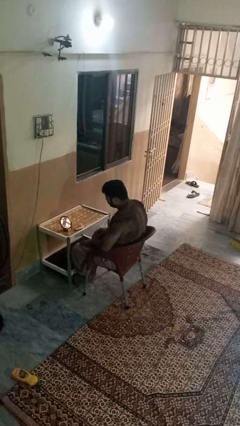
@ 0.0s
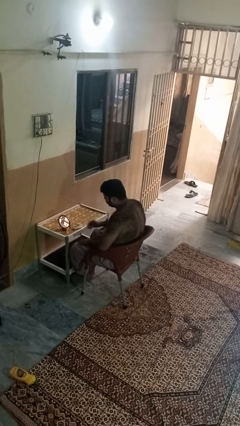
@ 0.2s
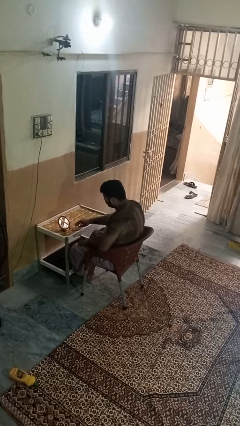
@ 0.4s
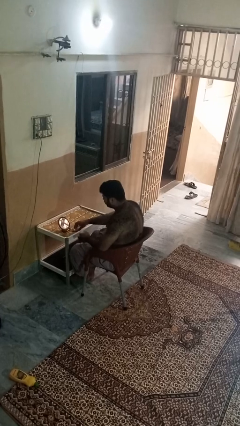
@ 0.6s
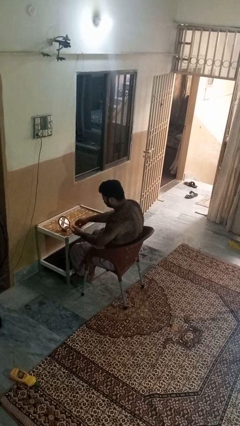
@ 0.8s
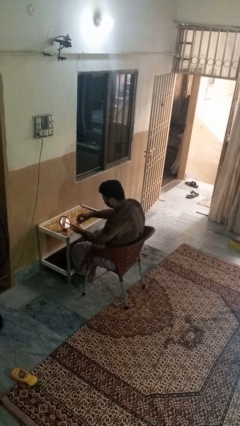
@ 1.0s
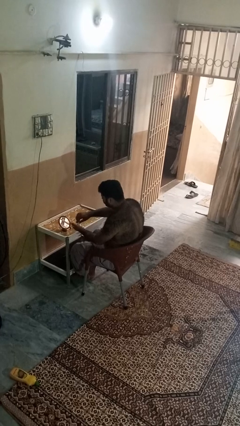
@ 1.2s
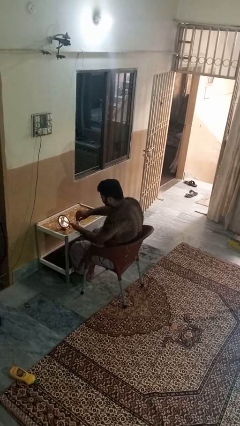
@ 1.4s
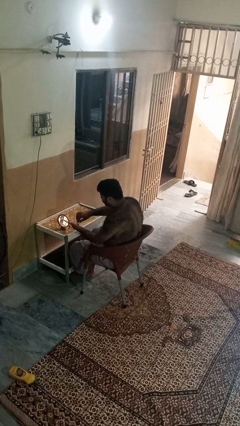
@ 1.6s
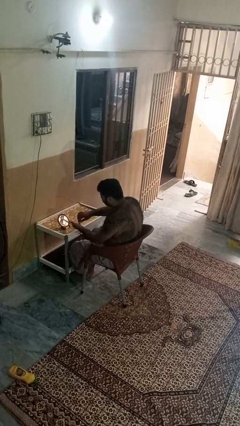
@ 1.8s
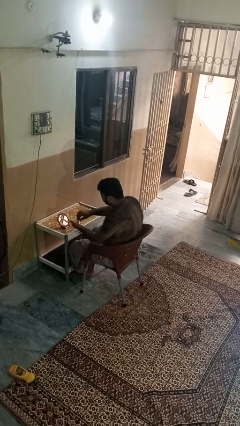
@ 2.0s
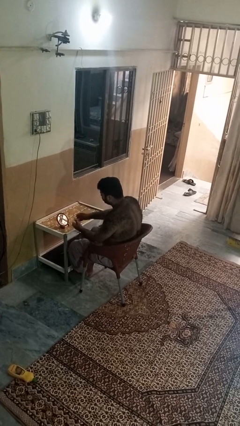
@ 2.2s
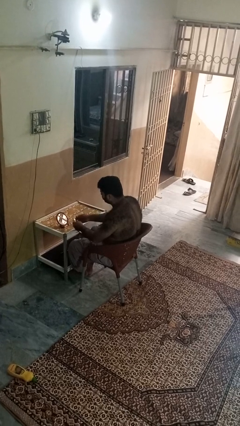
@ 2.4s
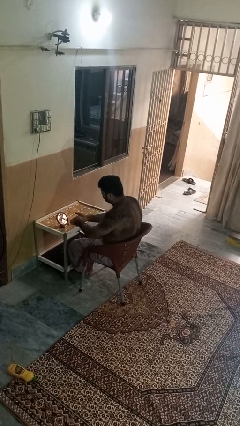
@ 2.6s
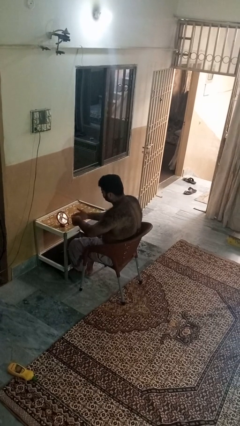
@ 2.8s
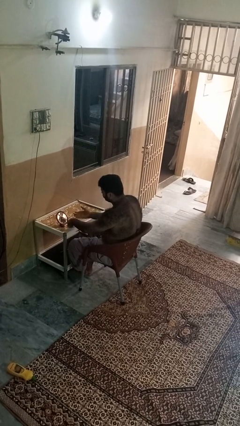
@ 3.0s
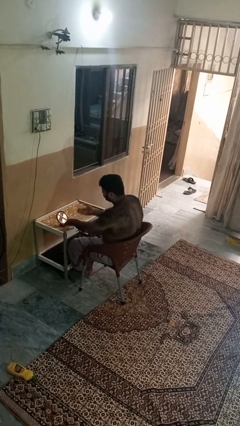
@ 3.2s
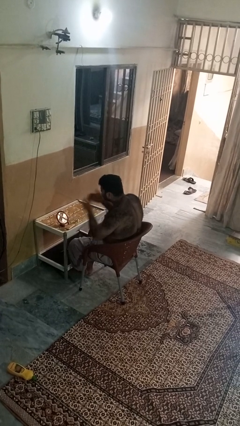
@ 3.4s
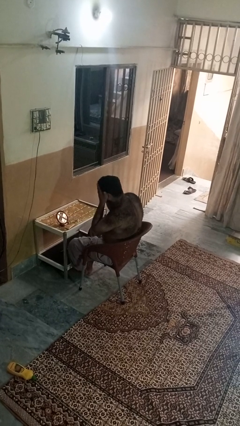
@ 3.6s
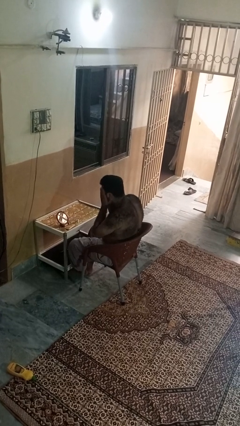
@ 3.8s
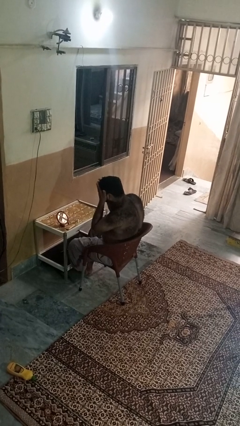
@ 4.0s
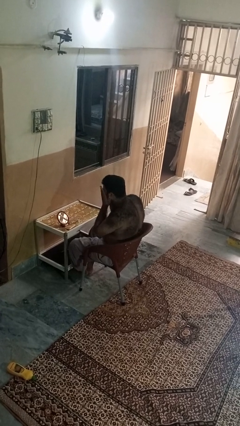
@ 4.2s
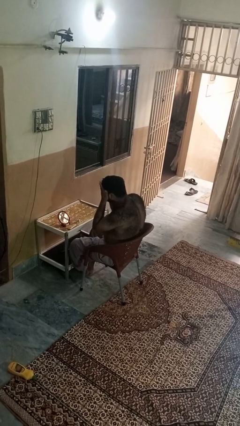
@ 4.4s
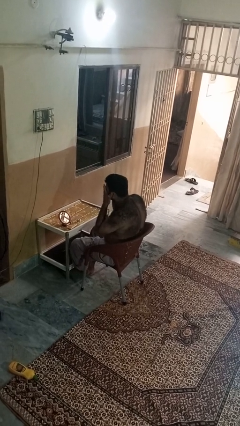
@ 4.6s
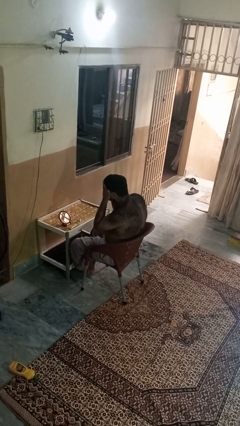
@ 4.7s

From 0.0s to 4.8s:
person applies foundation makeup

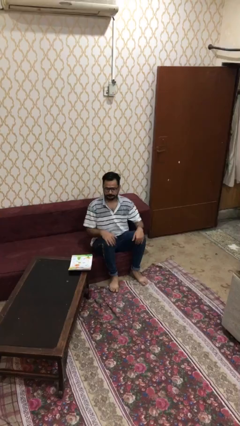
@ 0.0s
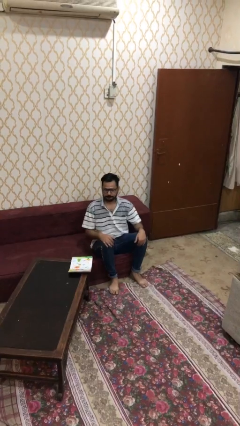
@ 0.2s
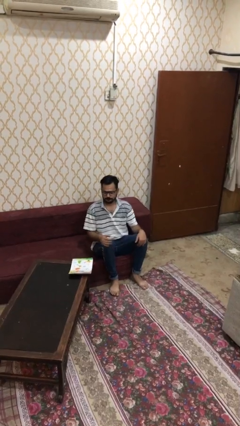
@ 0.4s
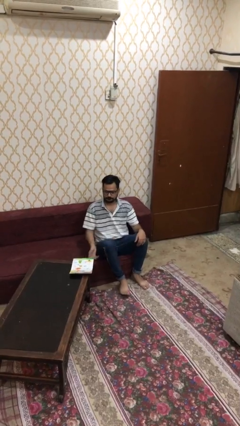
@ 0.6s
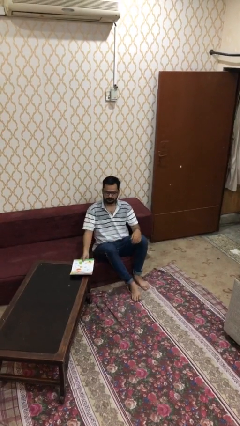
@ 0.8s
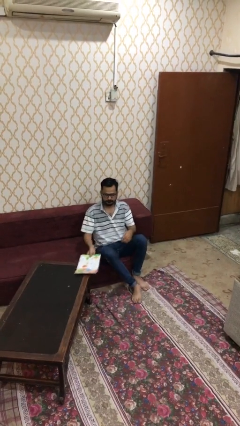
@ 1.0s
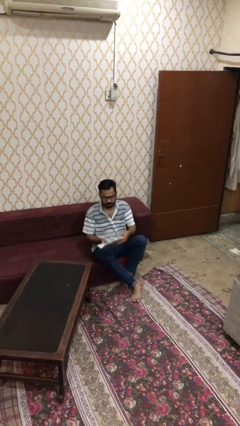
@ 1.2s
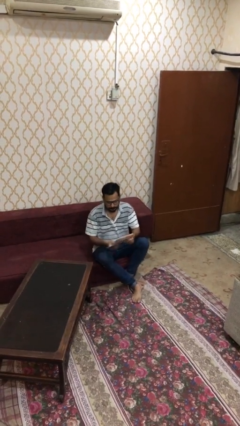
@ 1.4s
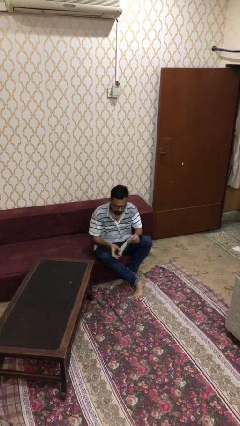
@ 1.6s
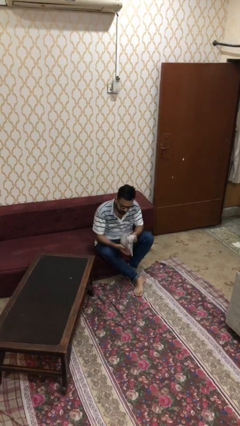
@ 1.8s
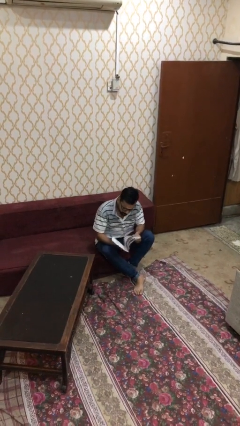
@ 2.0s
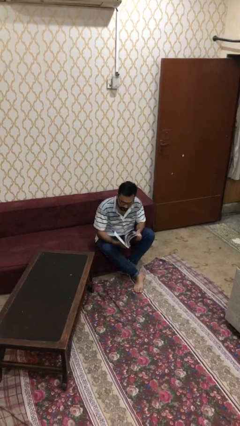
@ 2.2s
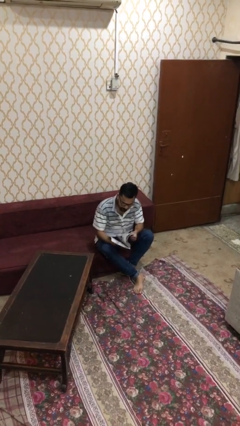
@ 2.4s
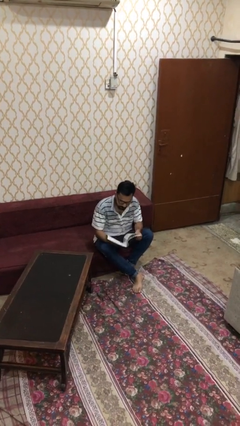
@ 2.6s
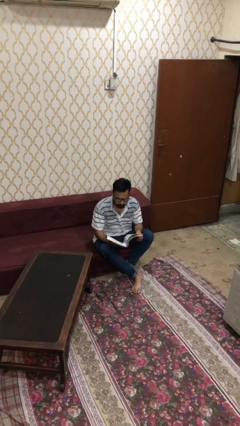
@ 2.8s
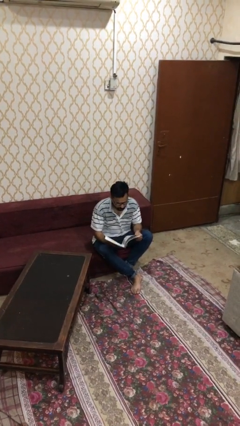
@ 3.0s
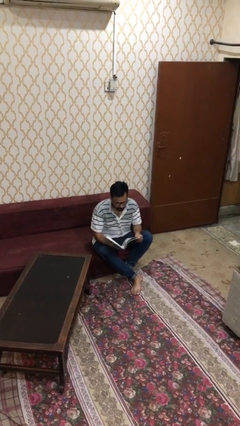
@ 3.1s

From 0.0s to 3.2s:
person reads document

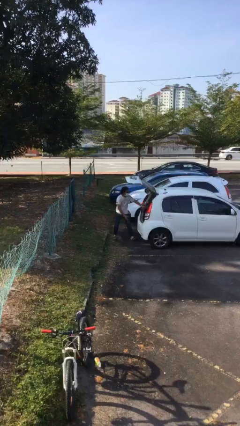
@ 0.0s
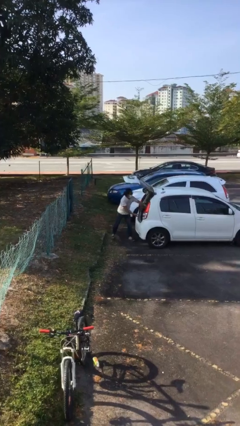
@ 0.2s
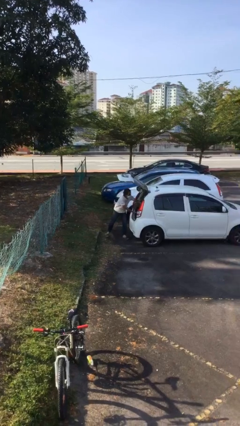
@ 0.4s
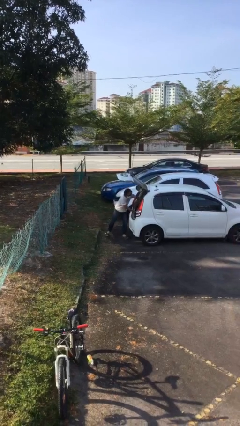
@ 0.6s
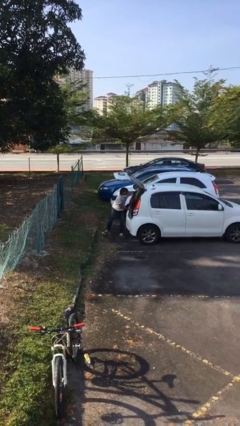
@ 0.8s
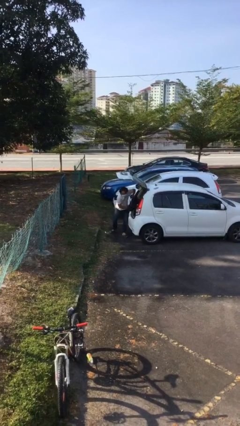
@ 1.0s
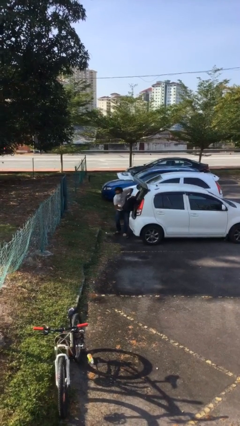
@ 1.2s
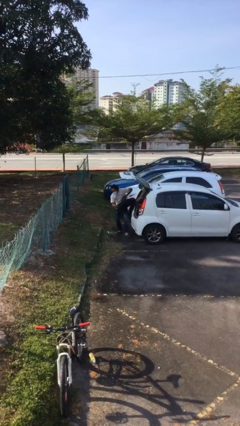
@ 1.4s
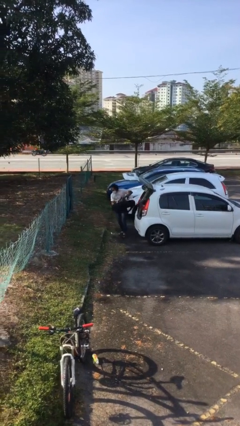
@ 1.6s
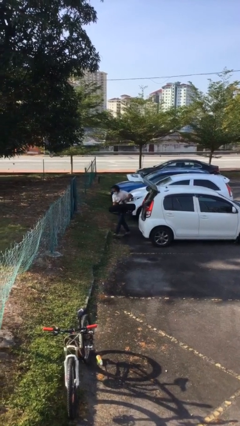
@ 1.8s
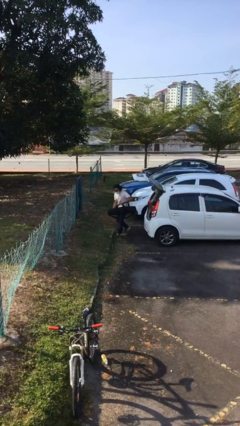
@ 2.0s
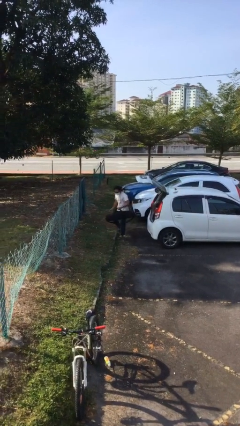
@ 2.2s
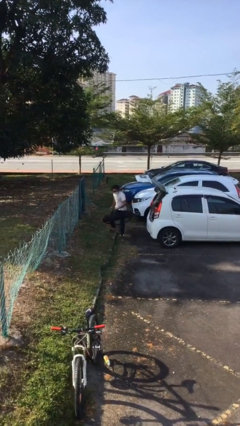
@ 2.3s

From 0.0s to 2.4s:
person unloads car

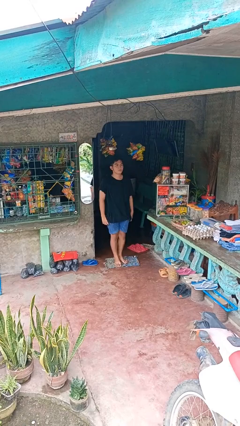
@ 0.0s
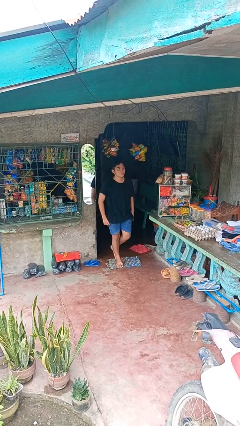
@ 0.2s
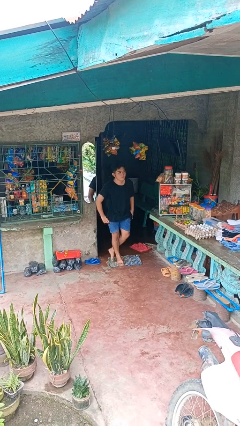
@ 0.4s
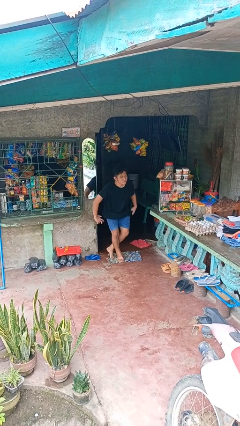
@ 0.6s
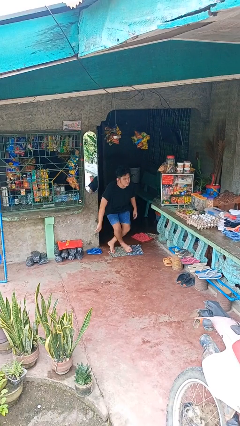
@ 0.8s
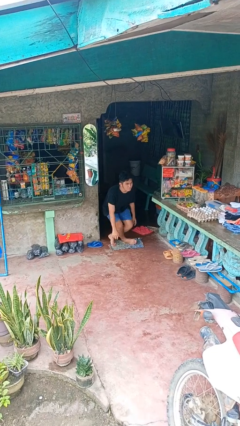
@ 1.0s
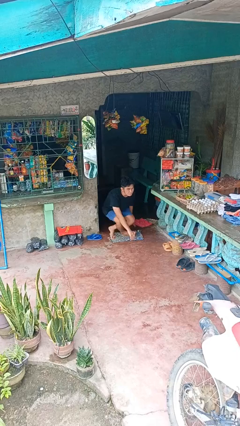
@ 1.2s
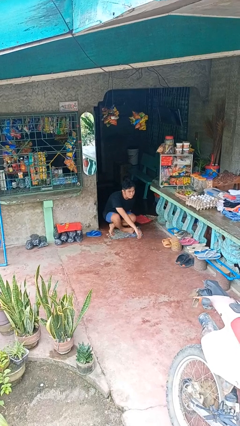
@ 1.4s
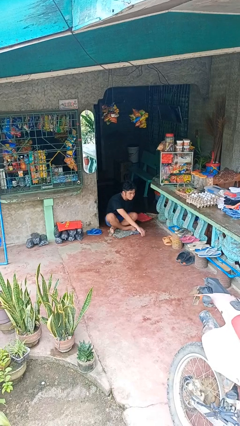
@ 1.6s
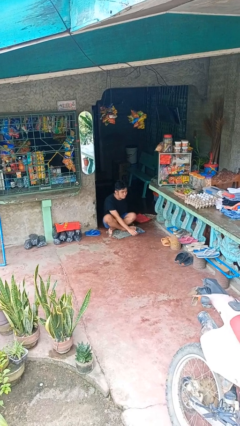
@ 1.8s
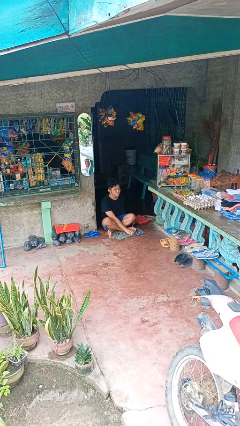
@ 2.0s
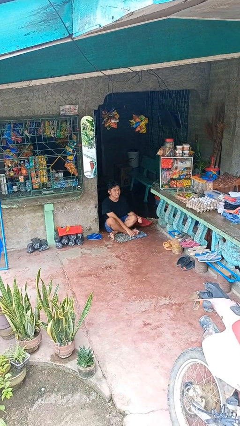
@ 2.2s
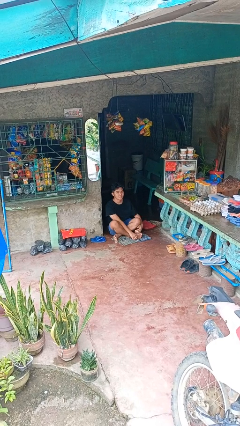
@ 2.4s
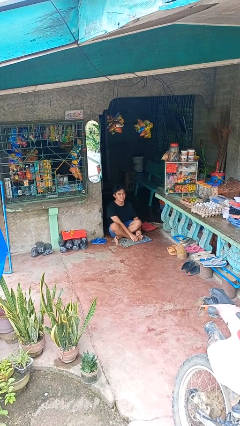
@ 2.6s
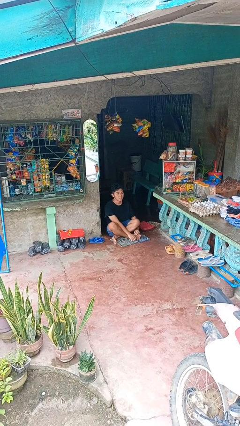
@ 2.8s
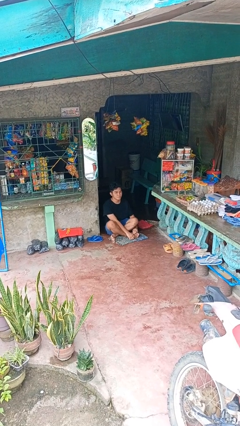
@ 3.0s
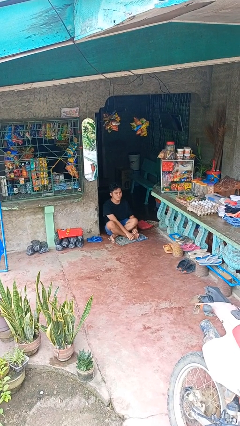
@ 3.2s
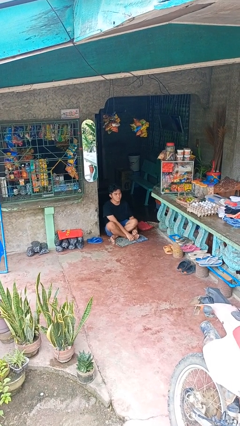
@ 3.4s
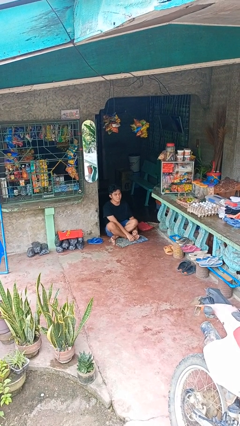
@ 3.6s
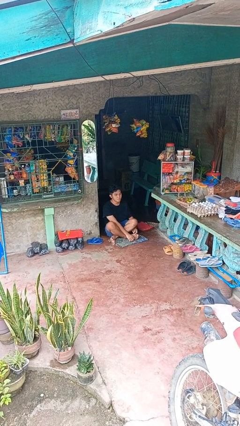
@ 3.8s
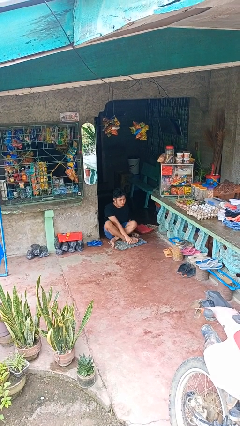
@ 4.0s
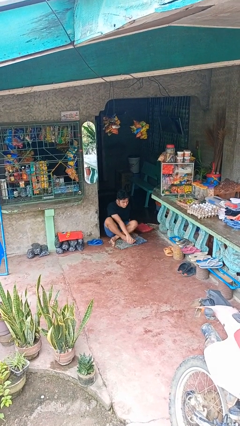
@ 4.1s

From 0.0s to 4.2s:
person sits crisscross

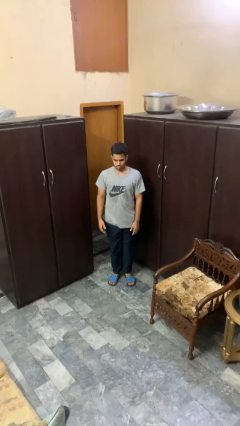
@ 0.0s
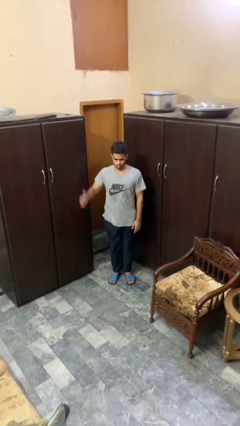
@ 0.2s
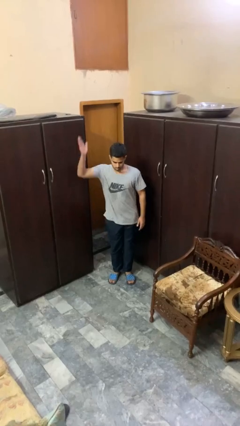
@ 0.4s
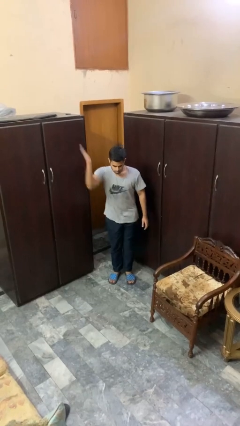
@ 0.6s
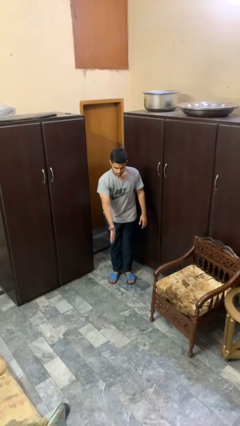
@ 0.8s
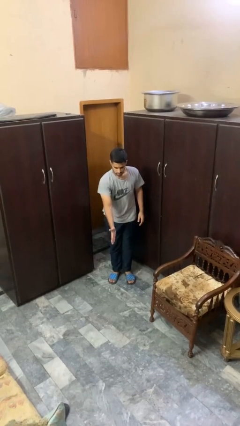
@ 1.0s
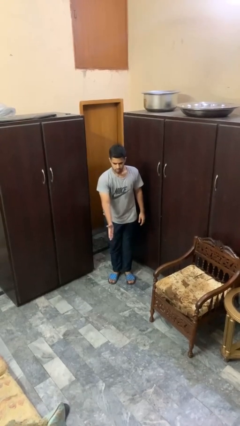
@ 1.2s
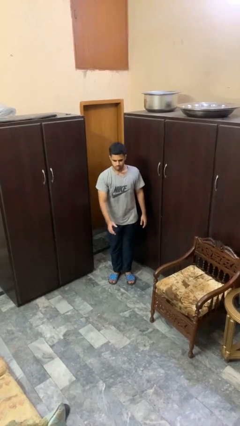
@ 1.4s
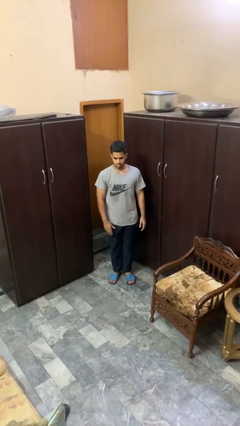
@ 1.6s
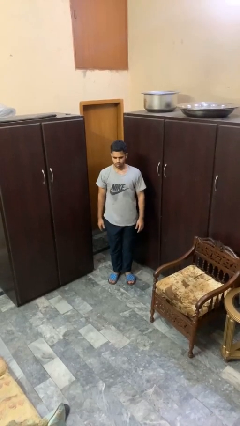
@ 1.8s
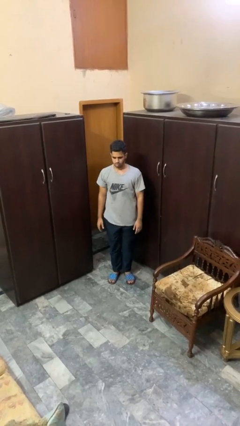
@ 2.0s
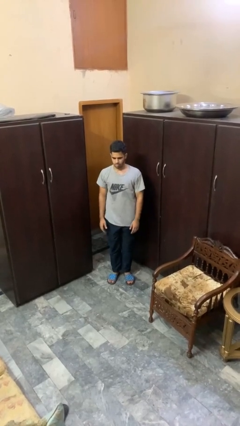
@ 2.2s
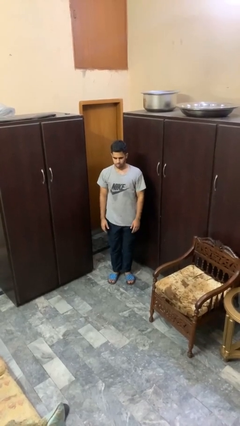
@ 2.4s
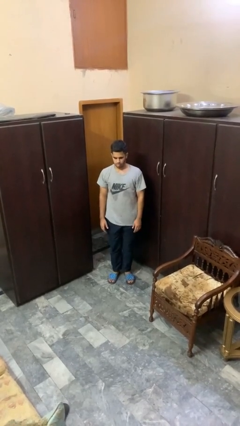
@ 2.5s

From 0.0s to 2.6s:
person karate chop

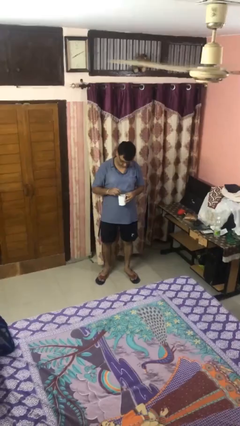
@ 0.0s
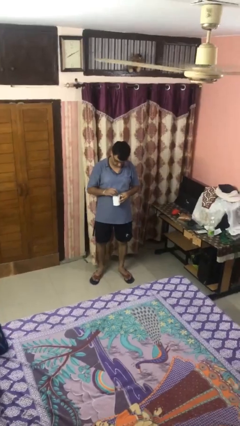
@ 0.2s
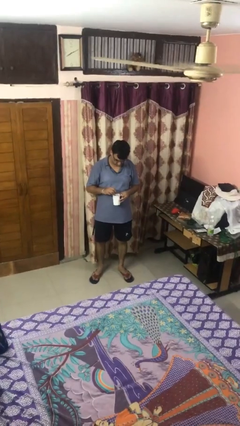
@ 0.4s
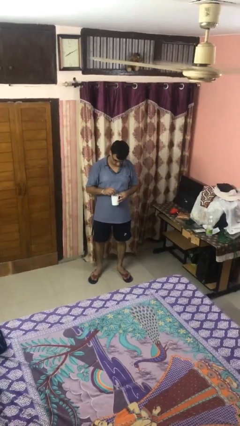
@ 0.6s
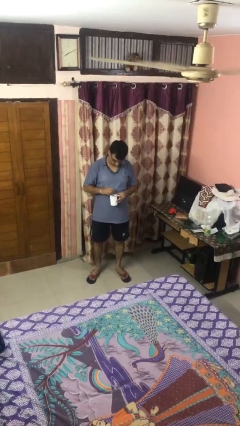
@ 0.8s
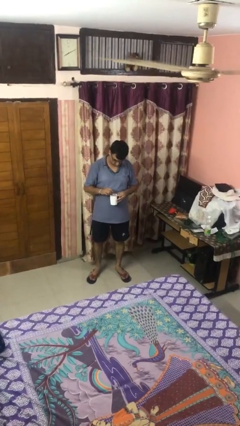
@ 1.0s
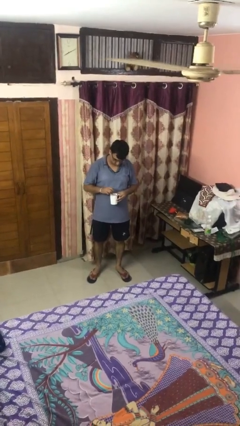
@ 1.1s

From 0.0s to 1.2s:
person stirs mug
